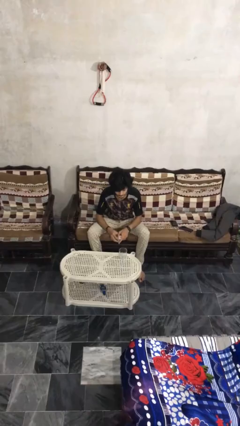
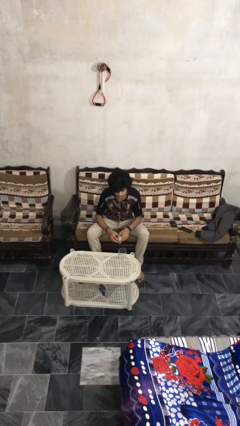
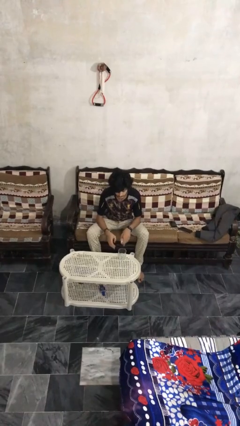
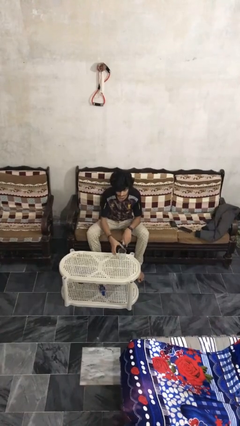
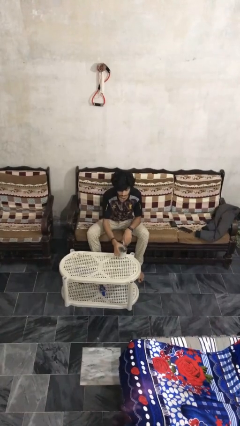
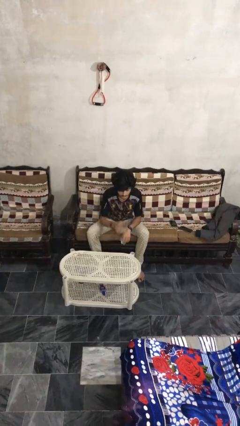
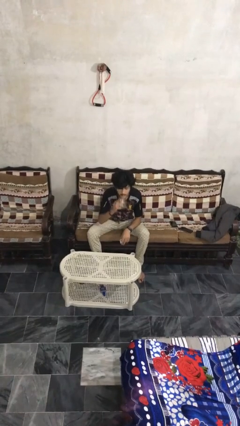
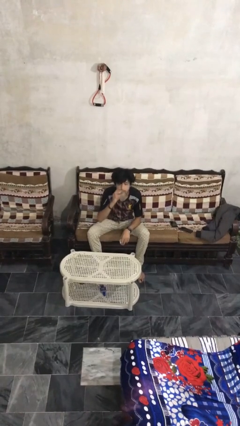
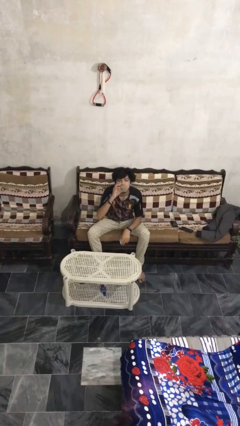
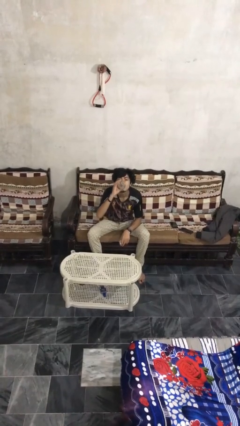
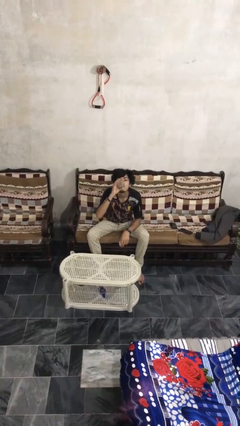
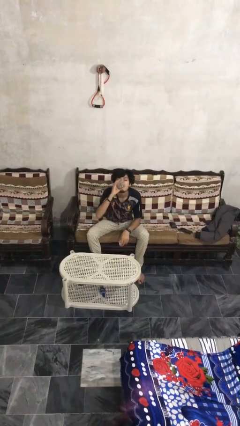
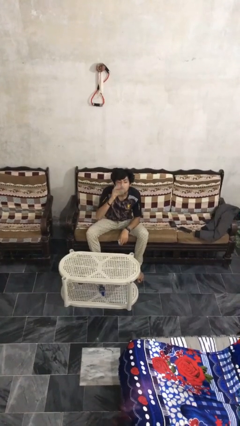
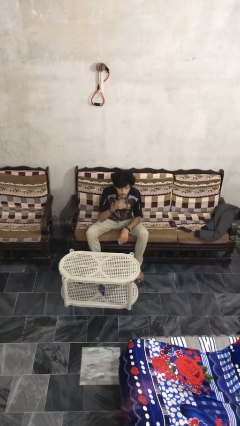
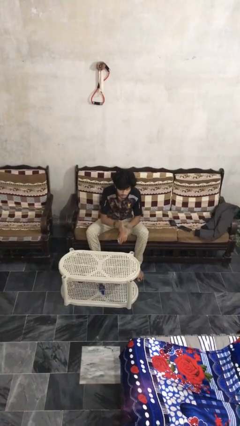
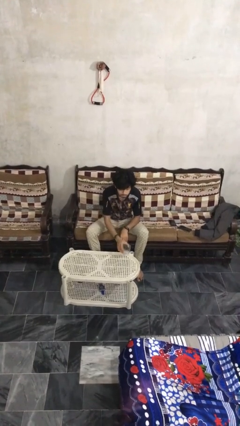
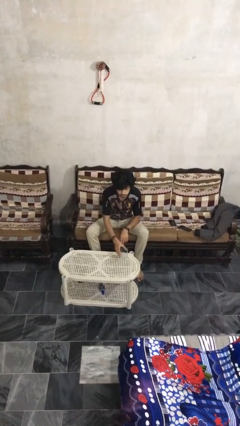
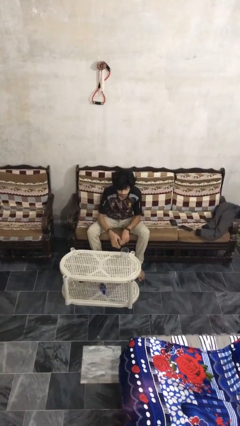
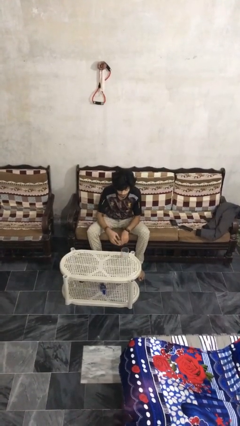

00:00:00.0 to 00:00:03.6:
person drinks from cup

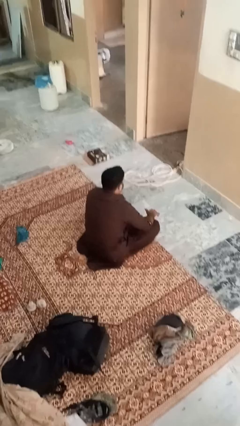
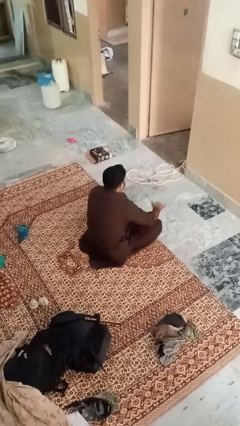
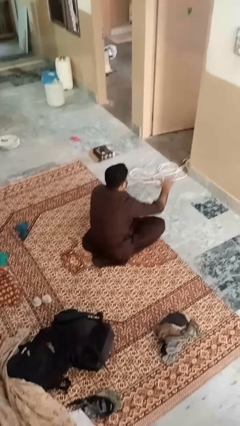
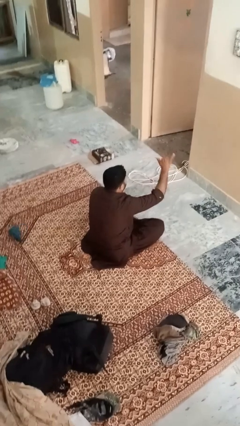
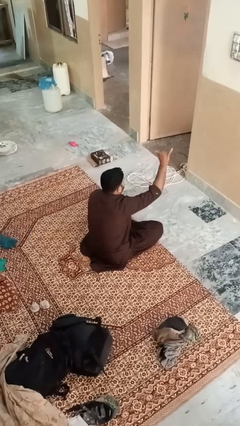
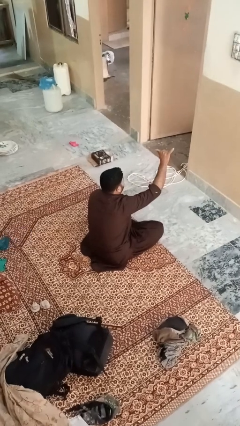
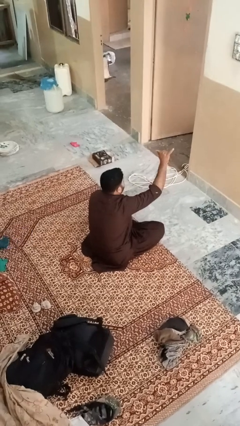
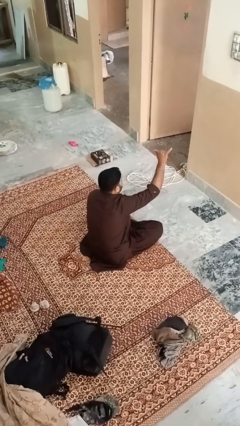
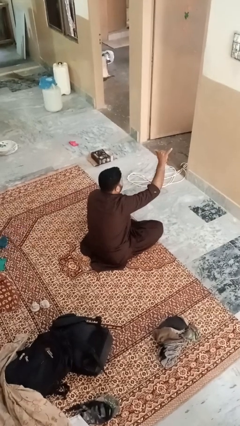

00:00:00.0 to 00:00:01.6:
person gestures hang loose

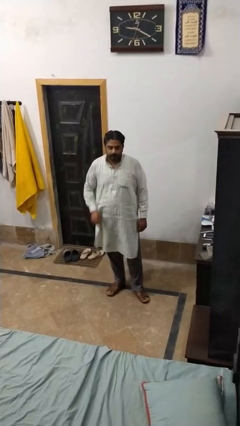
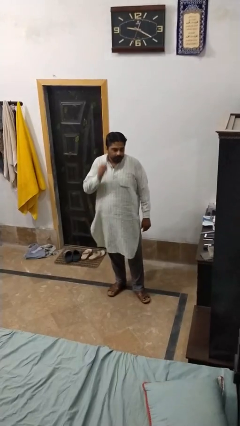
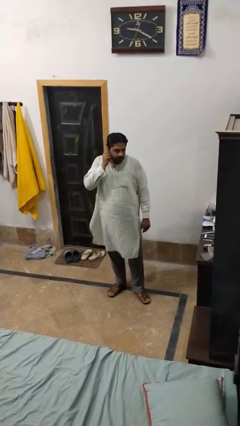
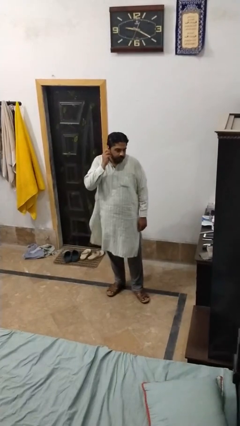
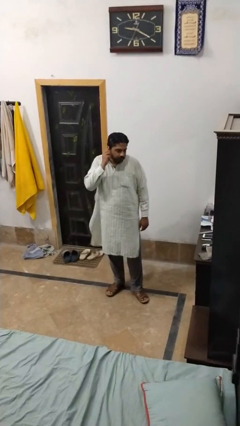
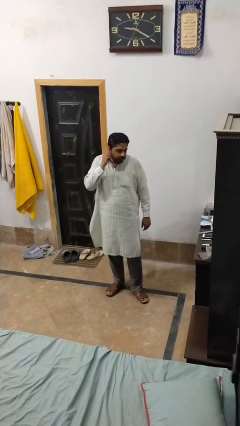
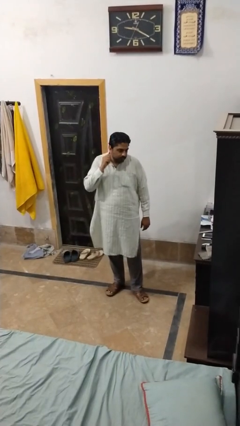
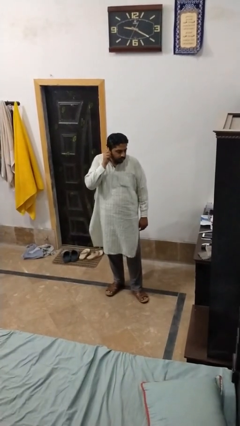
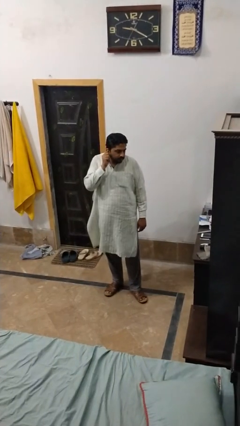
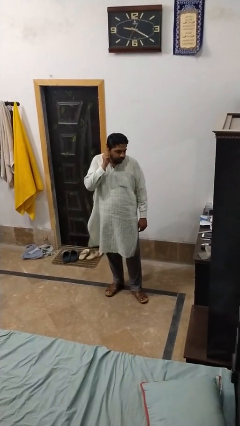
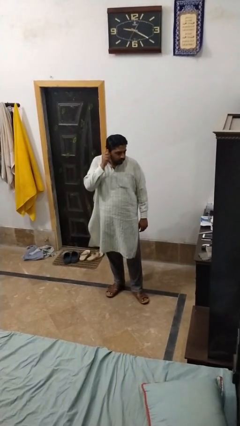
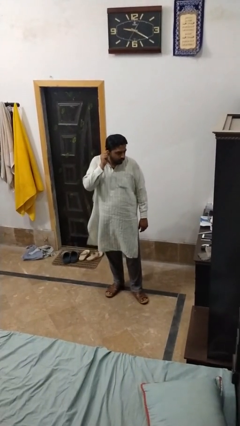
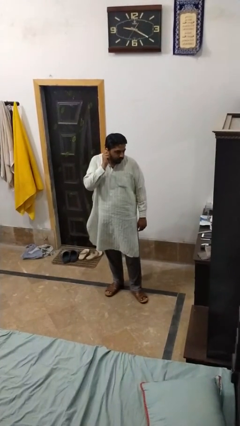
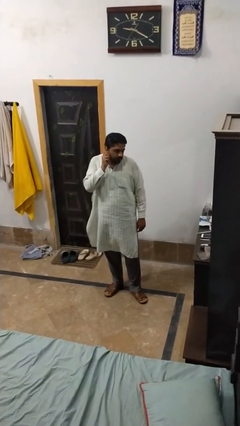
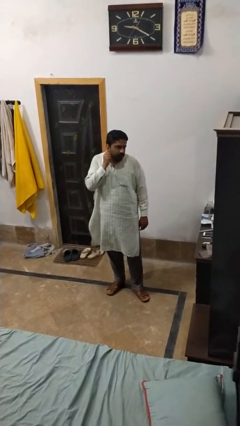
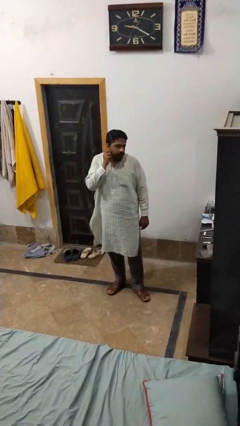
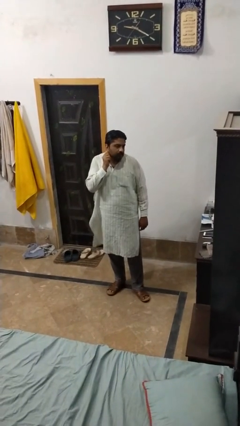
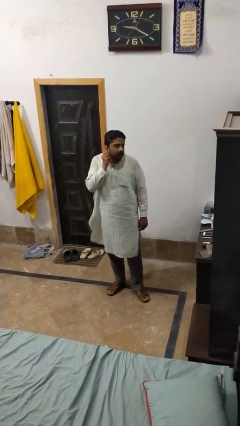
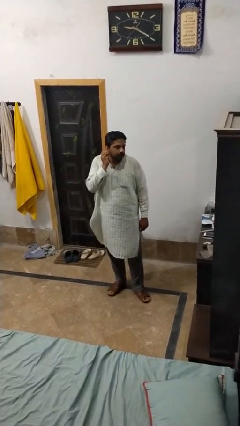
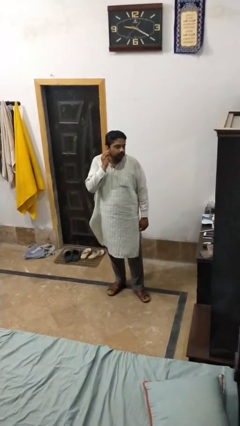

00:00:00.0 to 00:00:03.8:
person touches earlobe

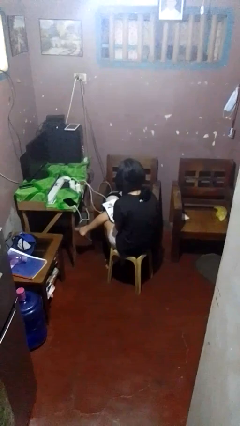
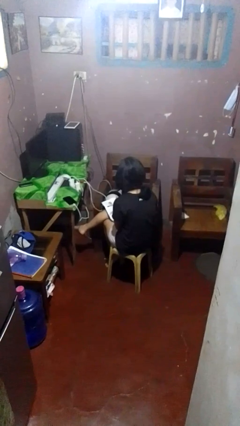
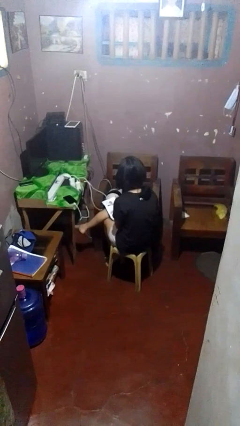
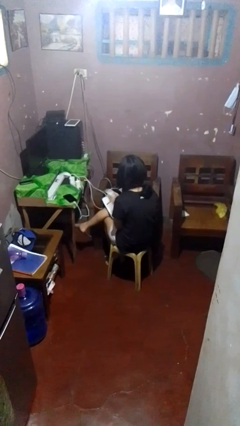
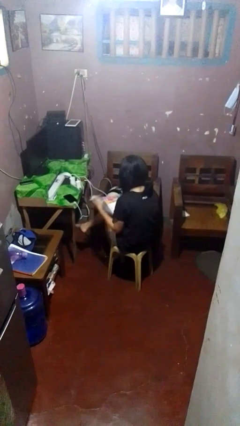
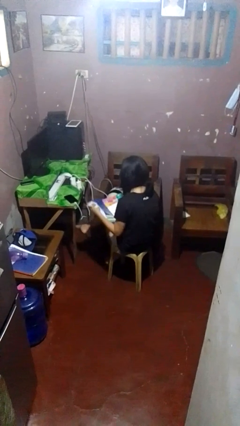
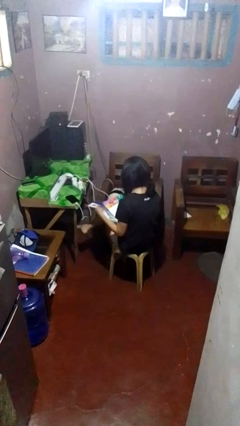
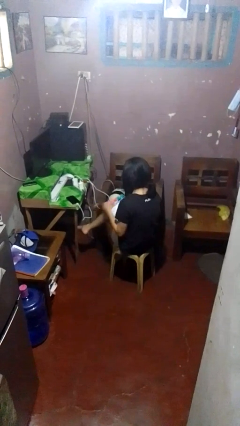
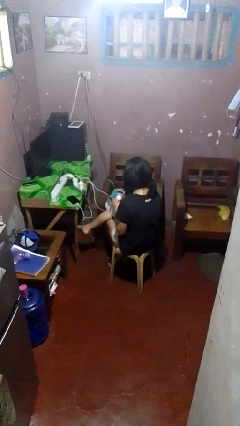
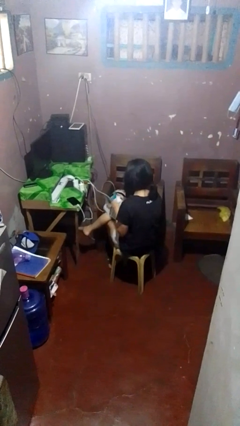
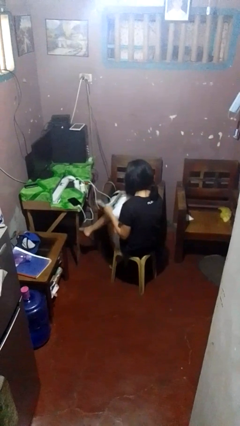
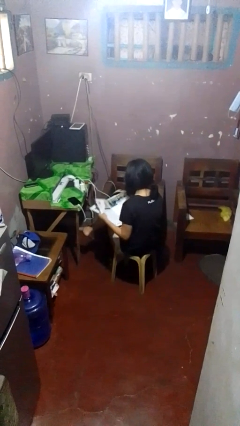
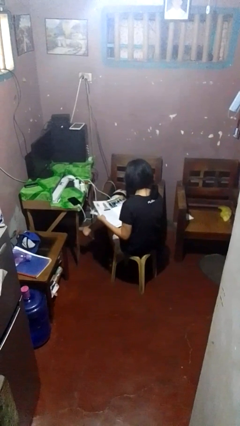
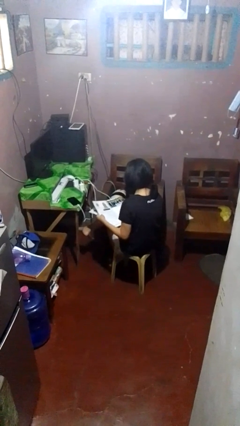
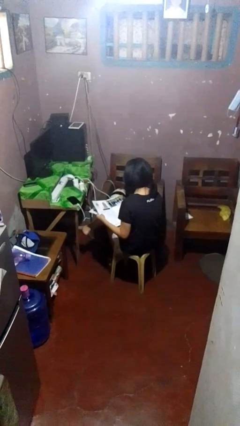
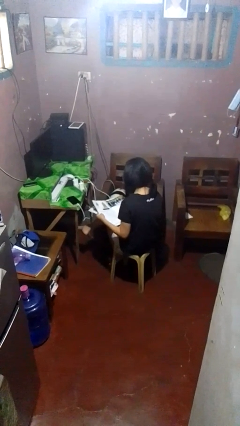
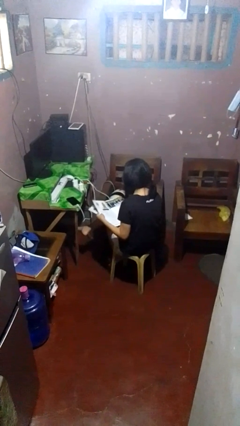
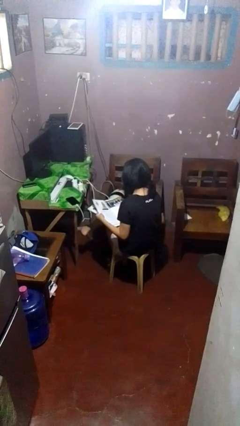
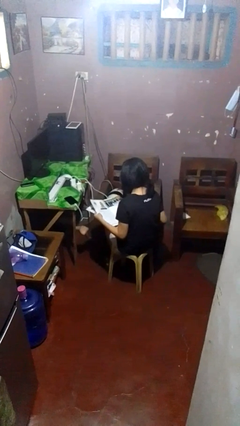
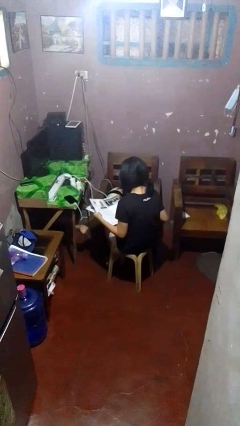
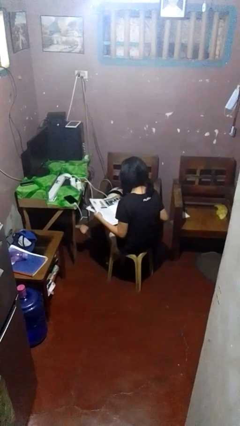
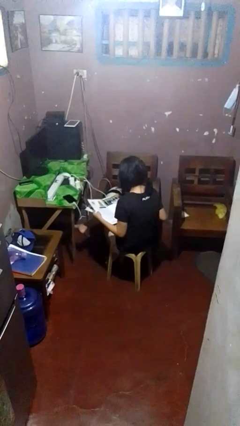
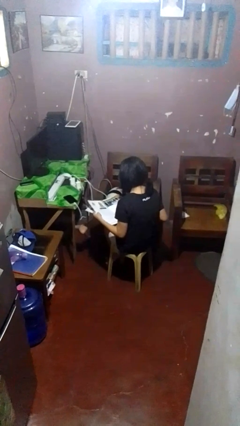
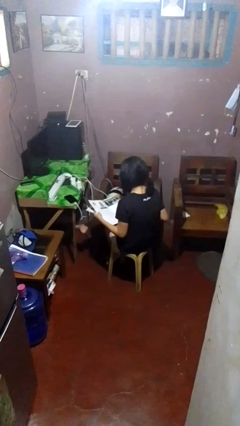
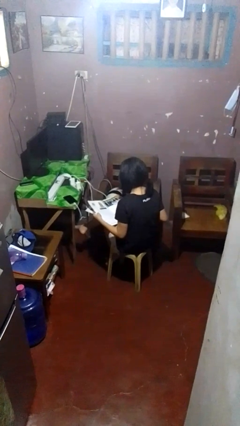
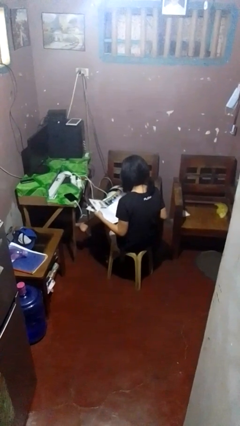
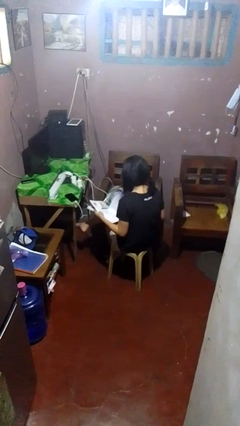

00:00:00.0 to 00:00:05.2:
person reads magazine

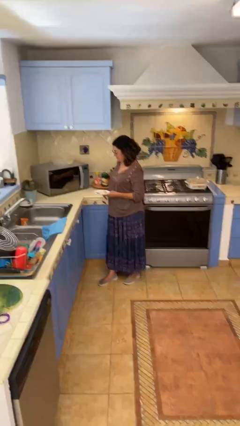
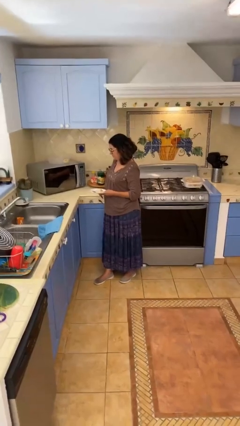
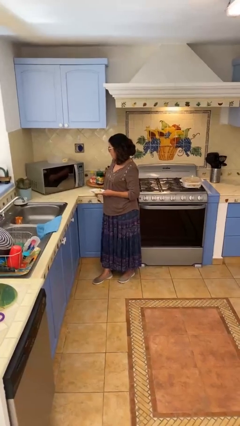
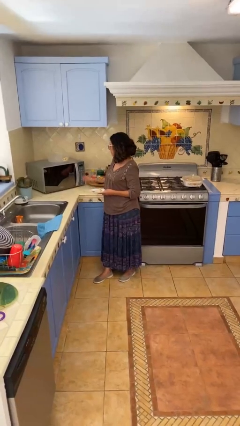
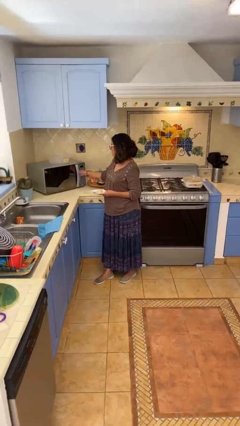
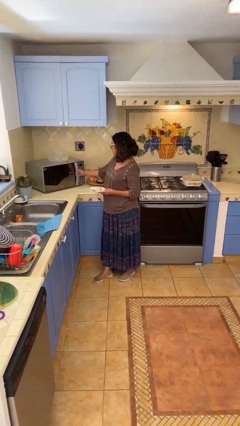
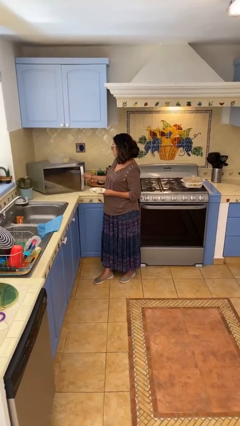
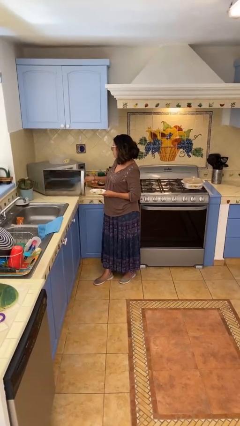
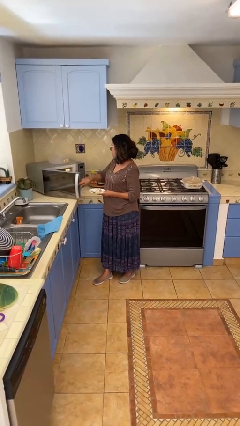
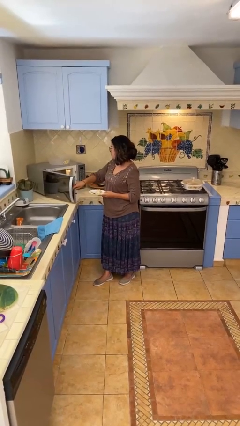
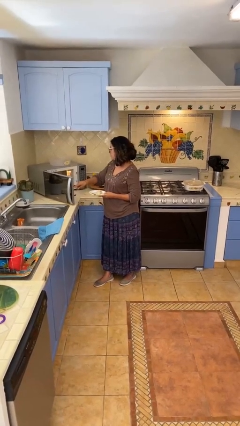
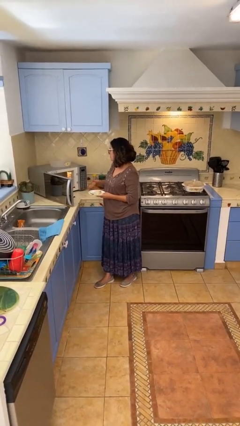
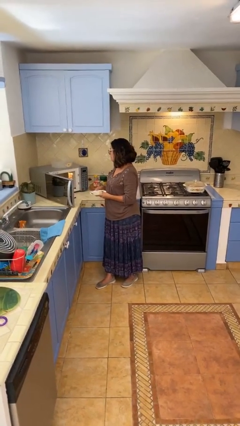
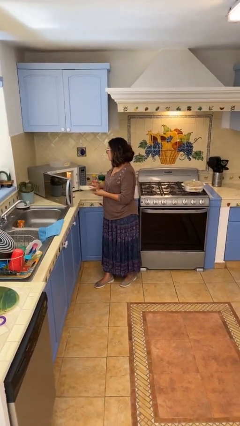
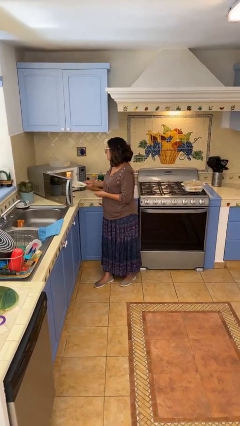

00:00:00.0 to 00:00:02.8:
person opens microwave

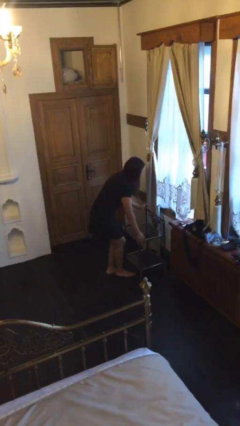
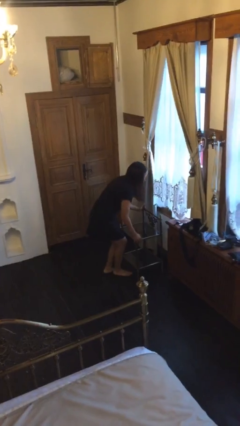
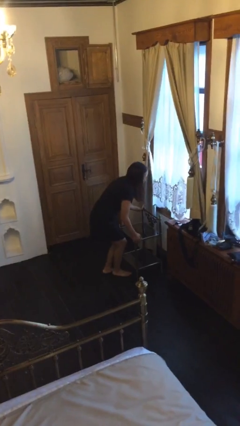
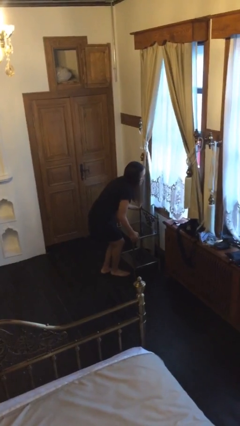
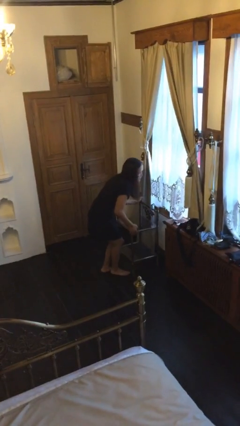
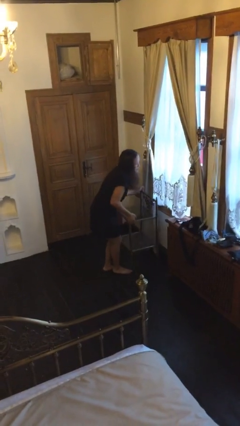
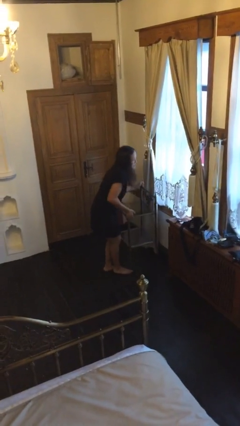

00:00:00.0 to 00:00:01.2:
person picks up object from floor
